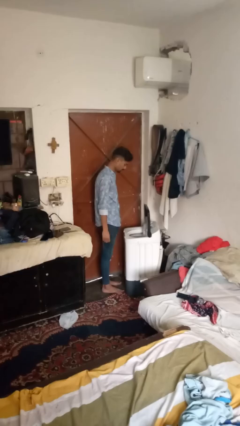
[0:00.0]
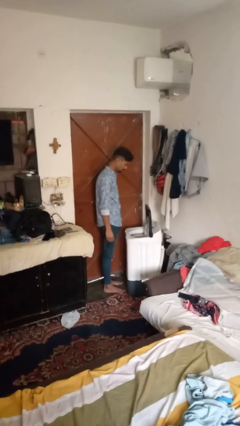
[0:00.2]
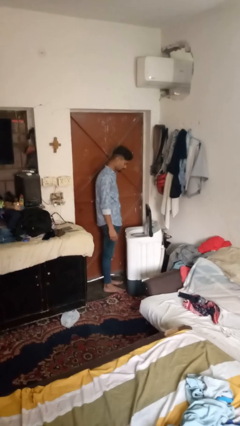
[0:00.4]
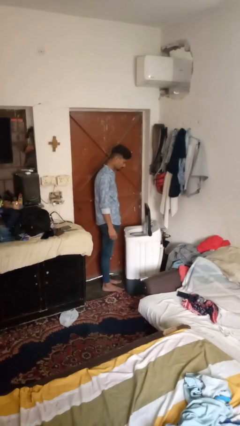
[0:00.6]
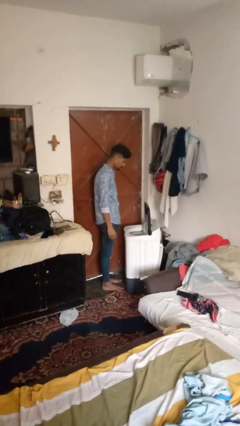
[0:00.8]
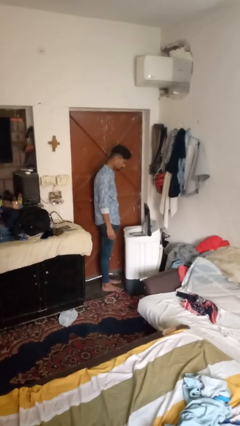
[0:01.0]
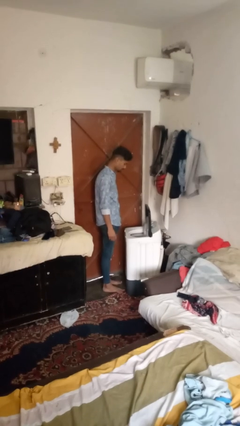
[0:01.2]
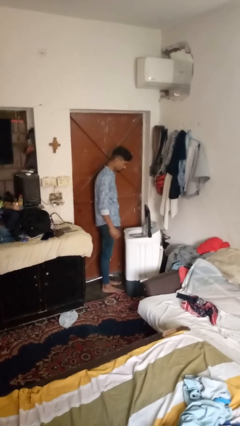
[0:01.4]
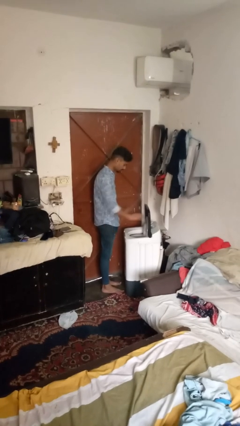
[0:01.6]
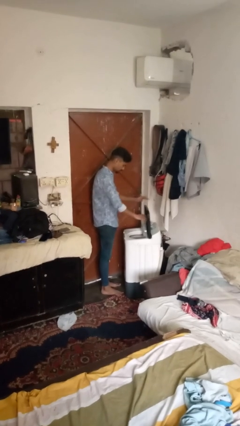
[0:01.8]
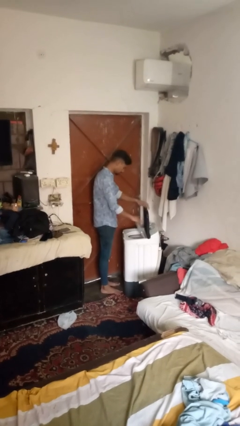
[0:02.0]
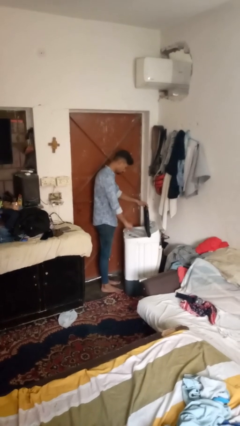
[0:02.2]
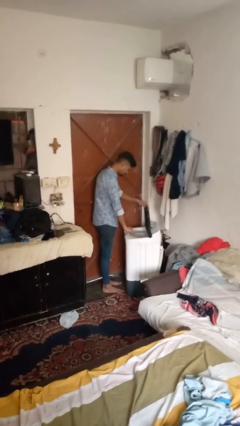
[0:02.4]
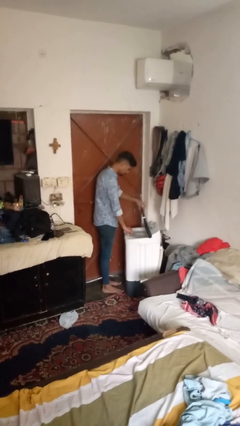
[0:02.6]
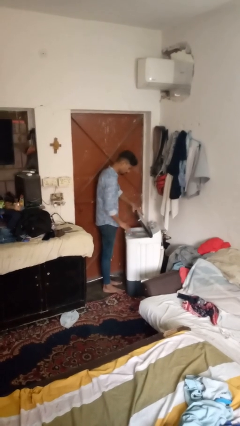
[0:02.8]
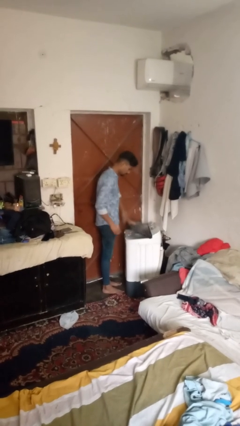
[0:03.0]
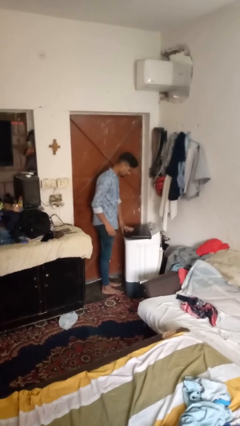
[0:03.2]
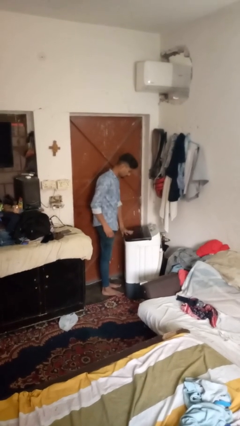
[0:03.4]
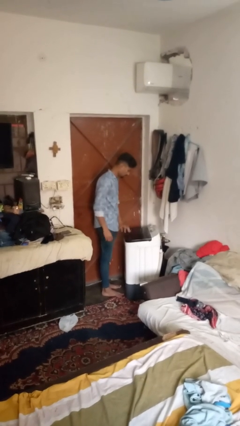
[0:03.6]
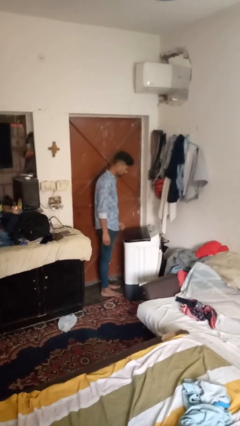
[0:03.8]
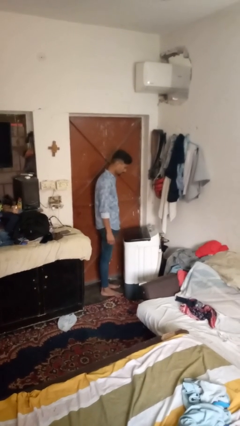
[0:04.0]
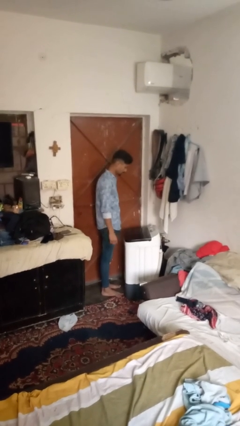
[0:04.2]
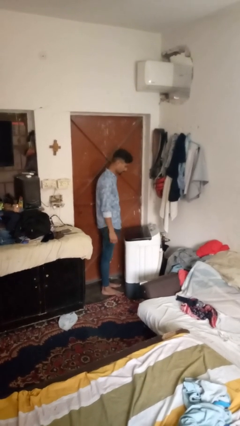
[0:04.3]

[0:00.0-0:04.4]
person closes clothes washer

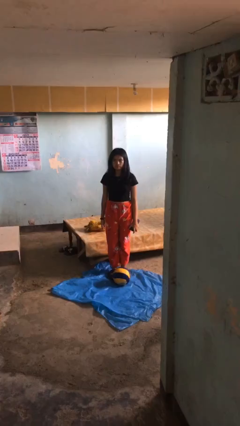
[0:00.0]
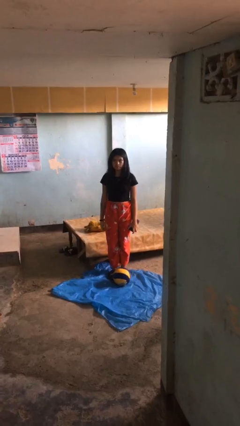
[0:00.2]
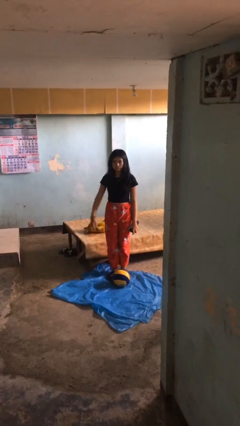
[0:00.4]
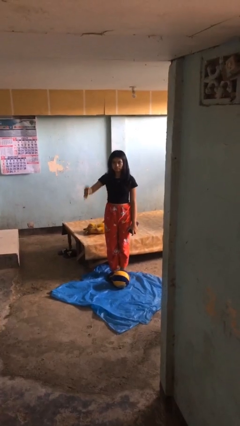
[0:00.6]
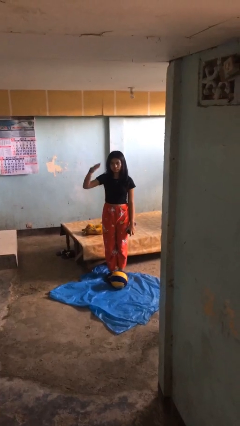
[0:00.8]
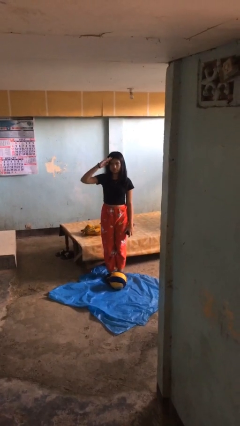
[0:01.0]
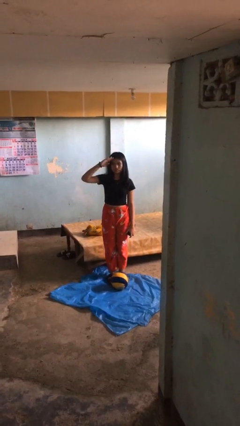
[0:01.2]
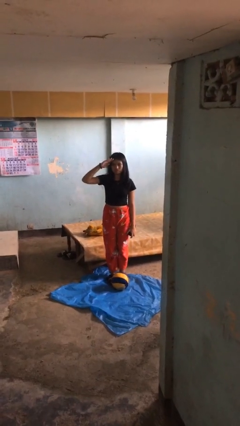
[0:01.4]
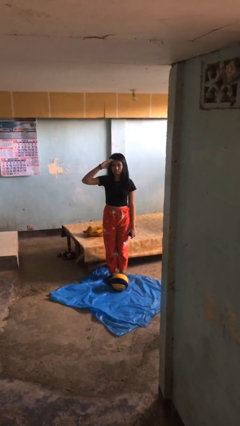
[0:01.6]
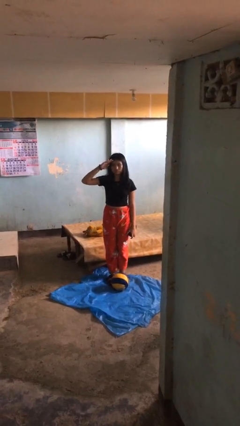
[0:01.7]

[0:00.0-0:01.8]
person salutes

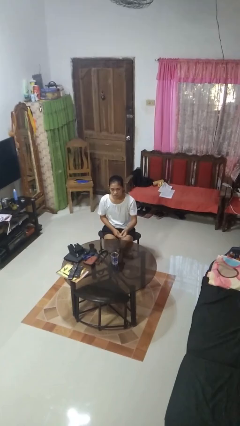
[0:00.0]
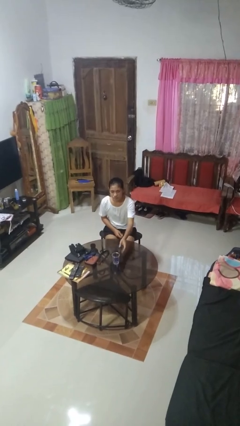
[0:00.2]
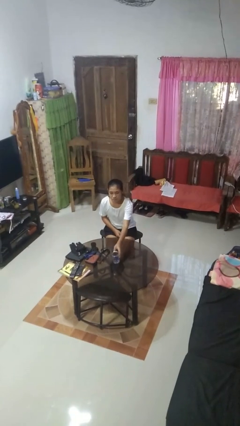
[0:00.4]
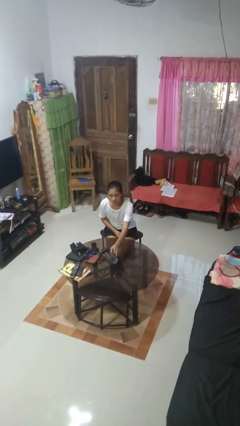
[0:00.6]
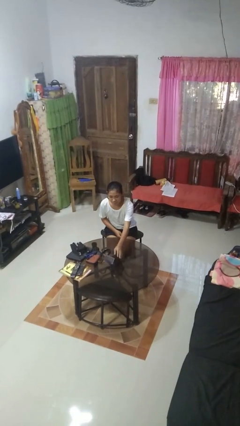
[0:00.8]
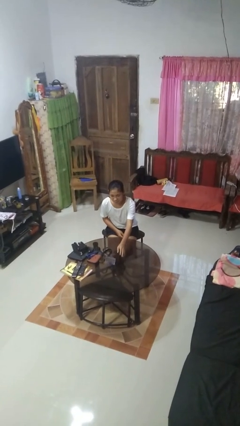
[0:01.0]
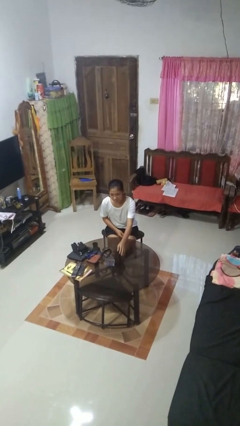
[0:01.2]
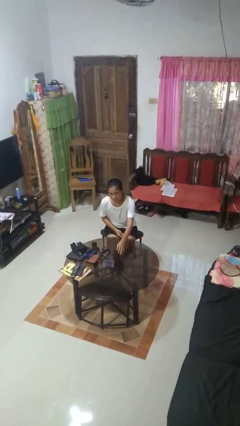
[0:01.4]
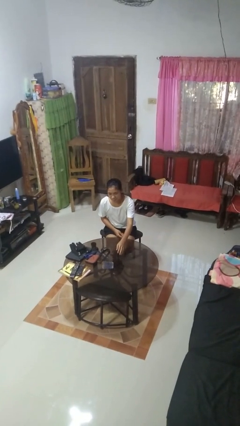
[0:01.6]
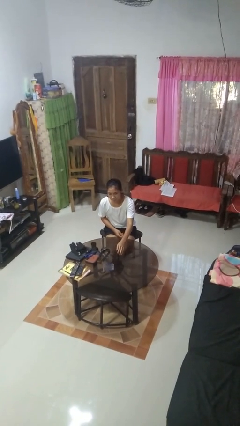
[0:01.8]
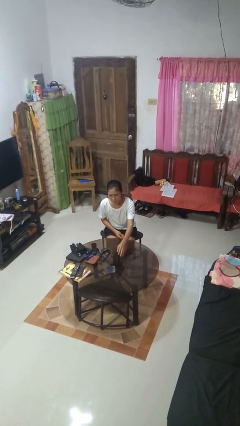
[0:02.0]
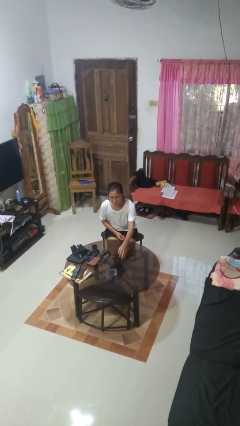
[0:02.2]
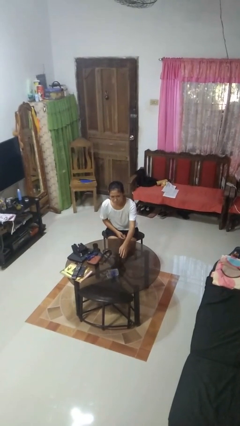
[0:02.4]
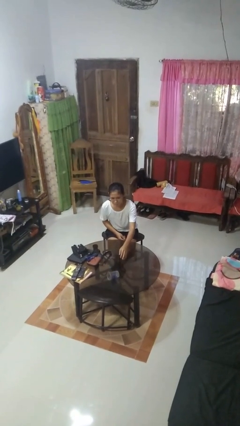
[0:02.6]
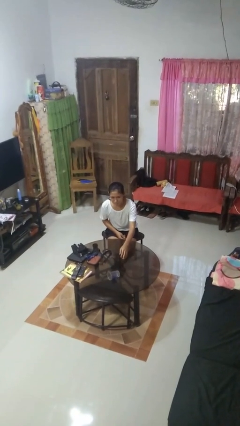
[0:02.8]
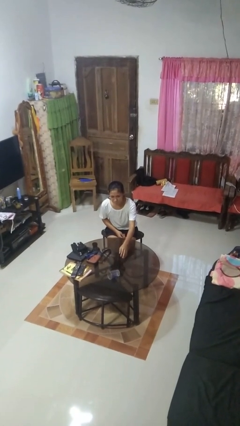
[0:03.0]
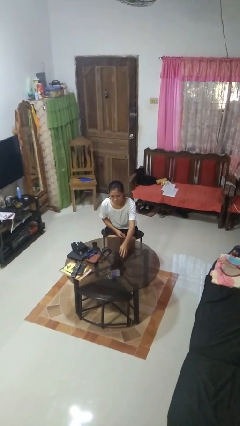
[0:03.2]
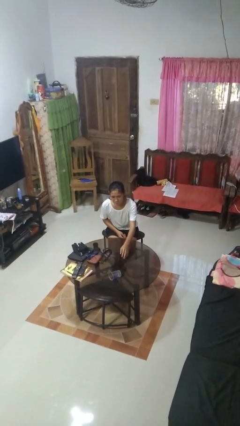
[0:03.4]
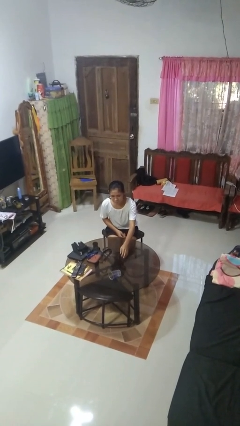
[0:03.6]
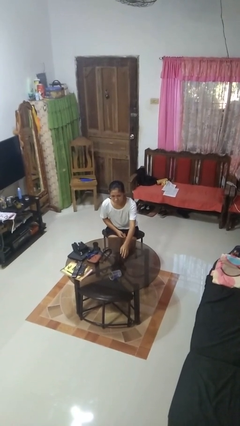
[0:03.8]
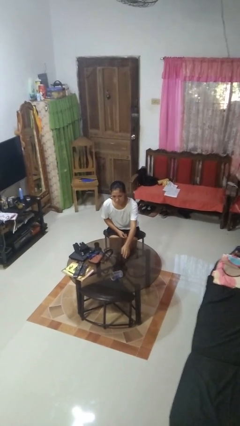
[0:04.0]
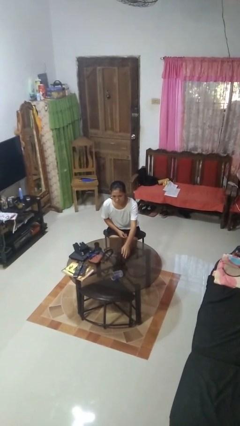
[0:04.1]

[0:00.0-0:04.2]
person knocks over glass

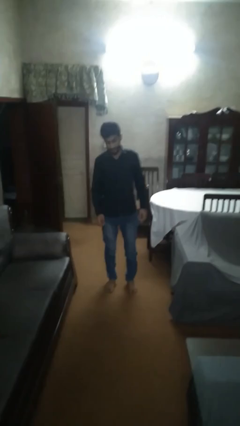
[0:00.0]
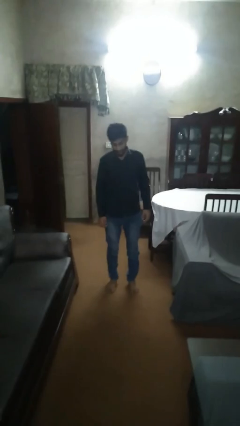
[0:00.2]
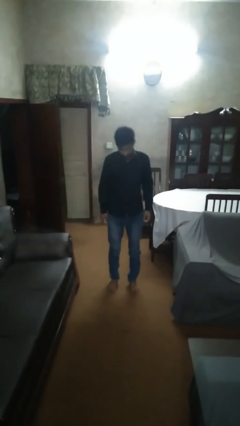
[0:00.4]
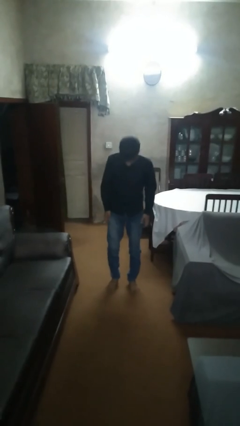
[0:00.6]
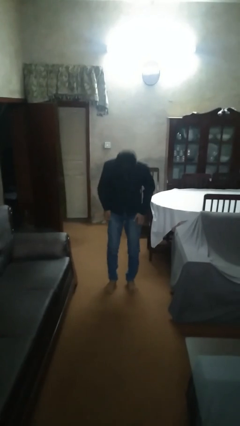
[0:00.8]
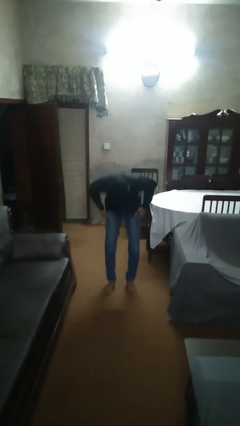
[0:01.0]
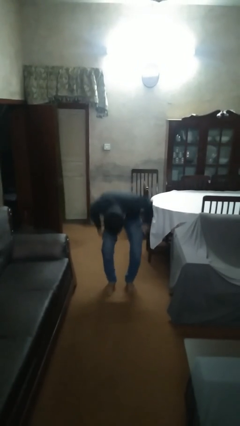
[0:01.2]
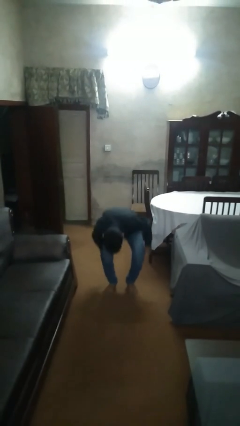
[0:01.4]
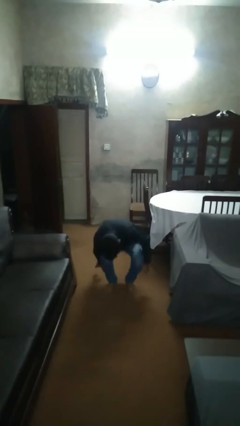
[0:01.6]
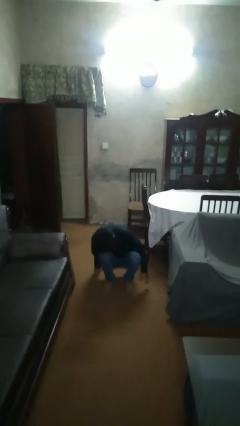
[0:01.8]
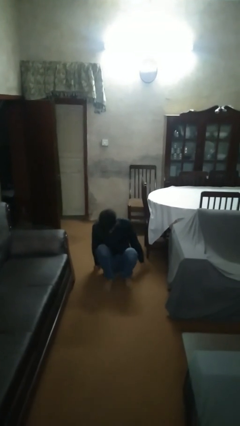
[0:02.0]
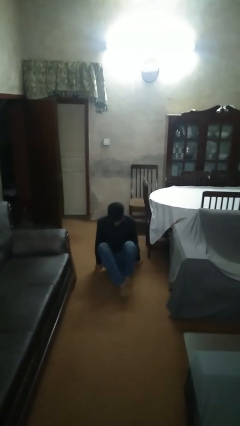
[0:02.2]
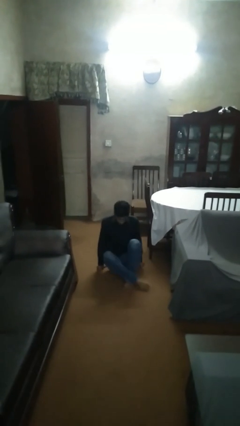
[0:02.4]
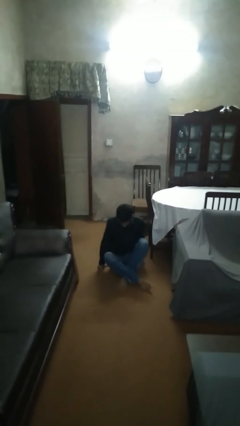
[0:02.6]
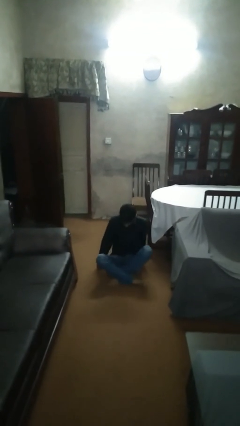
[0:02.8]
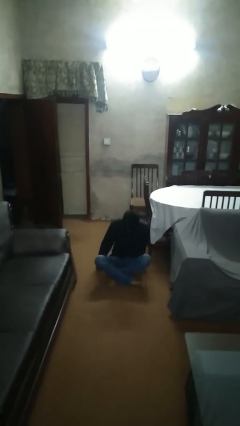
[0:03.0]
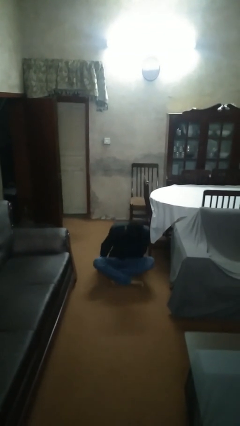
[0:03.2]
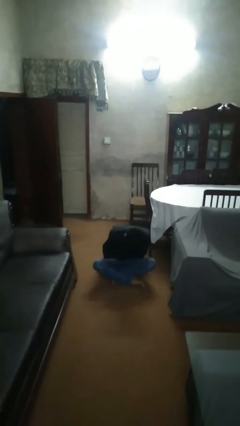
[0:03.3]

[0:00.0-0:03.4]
person sits crisscross

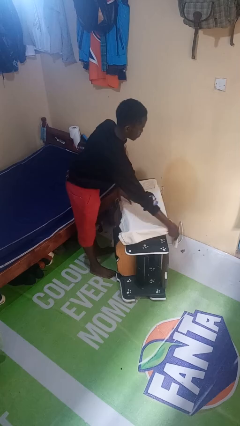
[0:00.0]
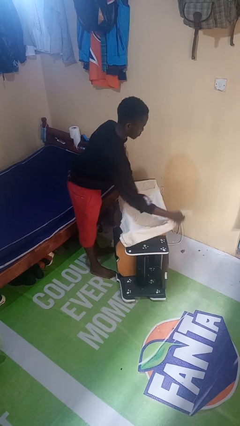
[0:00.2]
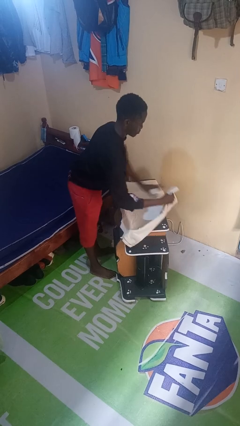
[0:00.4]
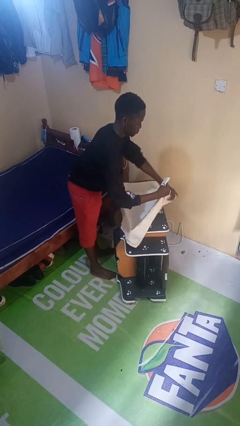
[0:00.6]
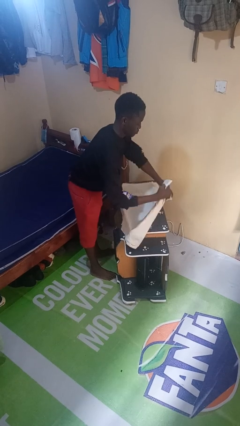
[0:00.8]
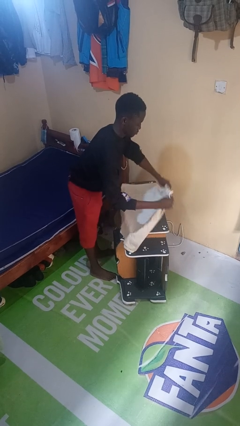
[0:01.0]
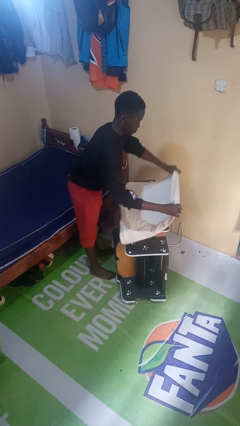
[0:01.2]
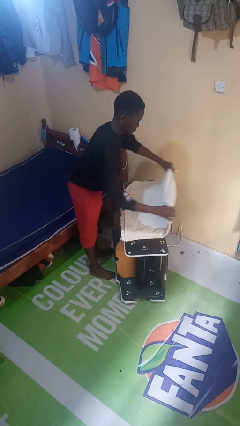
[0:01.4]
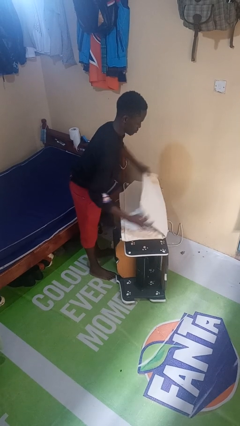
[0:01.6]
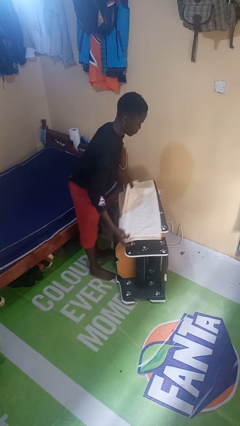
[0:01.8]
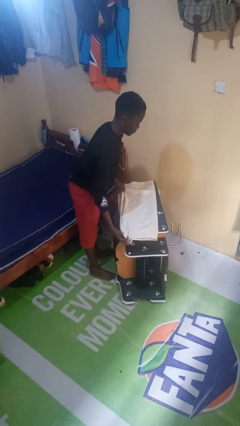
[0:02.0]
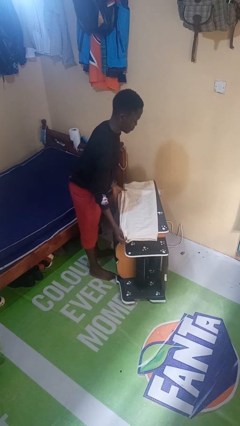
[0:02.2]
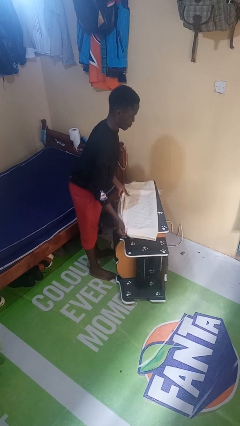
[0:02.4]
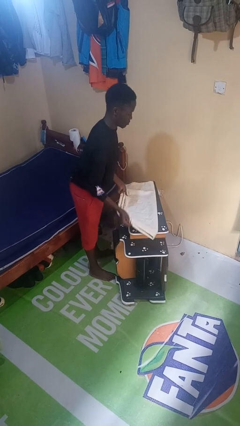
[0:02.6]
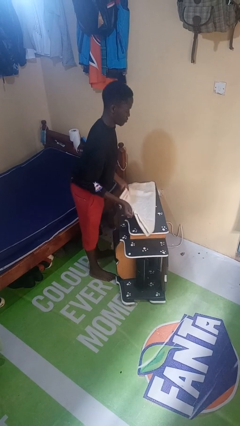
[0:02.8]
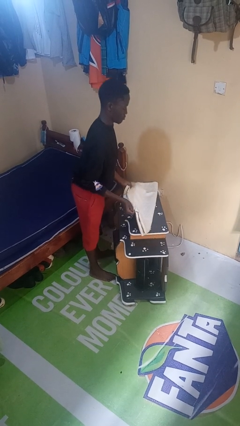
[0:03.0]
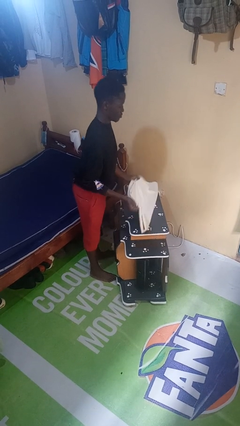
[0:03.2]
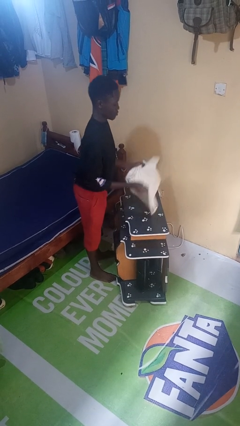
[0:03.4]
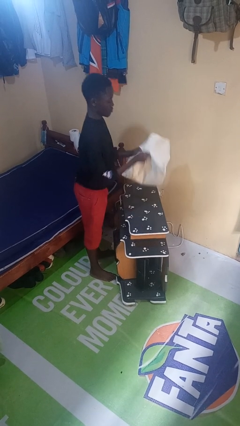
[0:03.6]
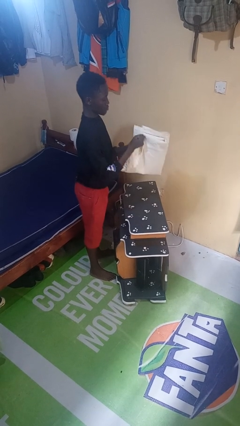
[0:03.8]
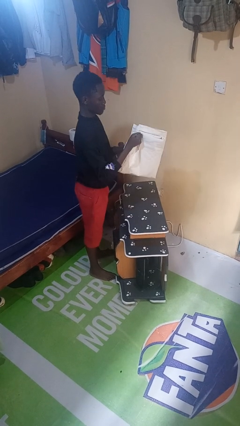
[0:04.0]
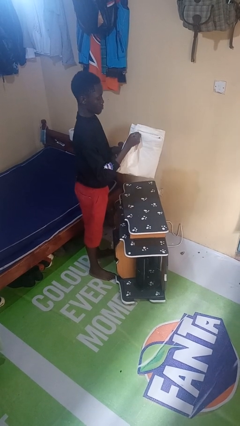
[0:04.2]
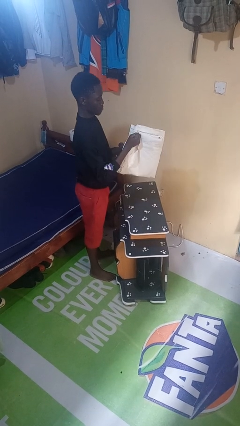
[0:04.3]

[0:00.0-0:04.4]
person folds tablecloth
